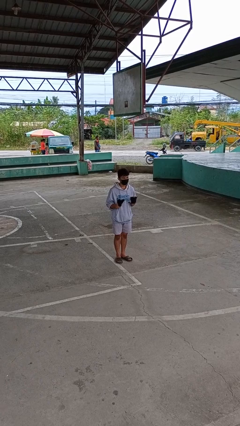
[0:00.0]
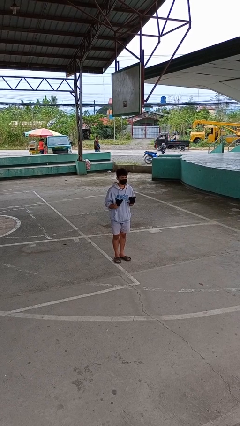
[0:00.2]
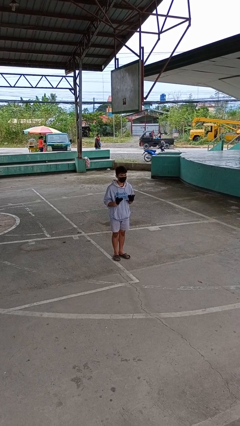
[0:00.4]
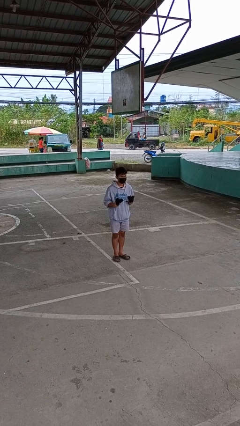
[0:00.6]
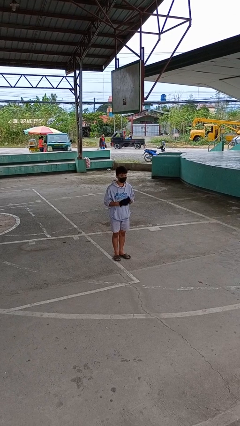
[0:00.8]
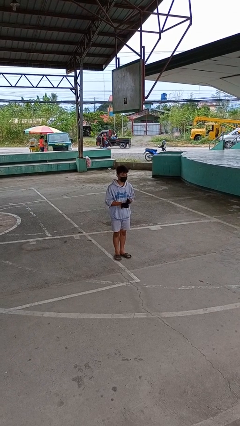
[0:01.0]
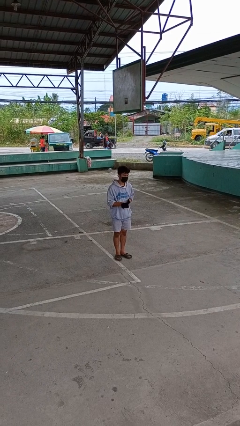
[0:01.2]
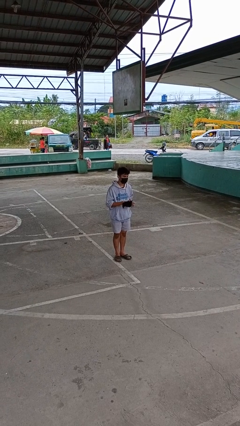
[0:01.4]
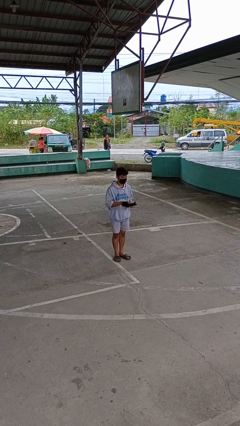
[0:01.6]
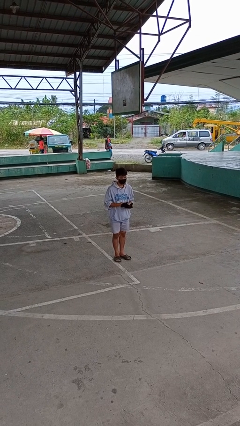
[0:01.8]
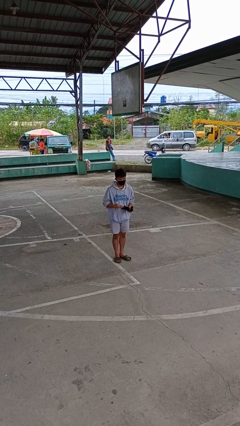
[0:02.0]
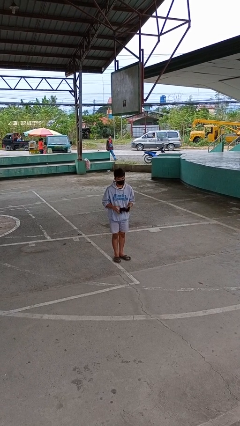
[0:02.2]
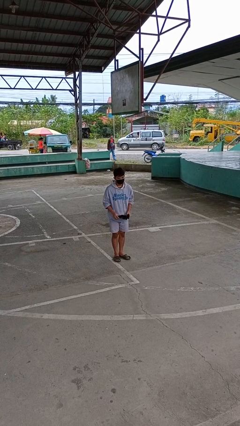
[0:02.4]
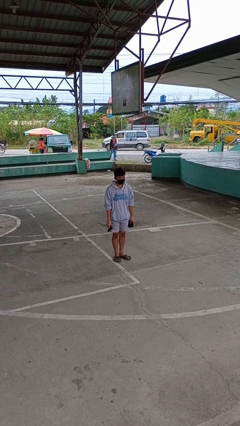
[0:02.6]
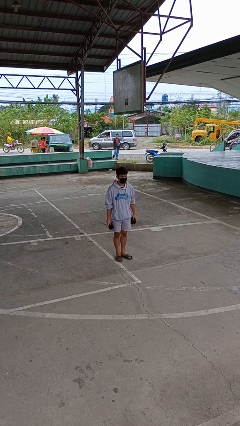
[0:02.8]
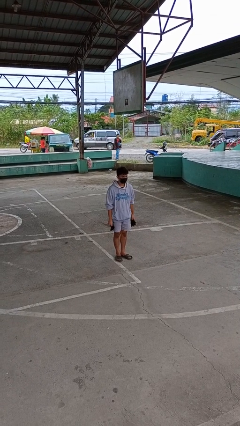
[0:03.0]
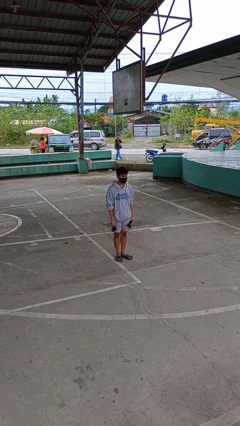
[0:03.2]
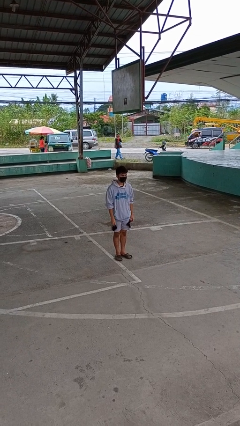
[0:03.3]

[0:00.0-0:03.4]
person takes off gloves

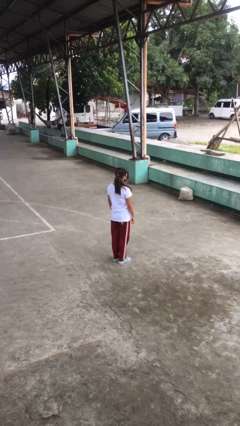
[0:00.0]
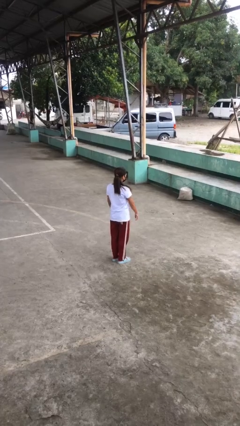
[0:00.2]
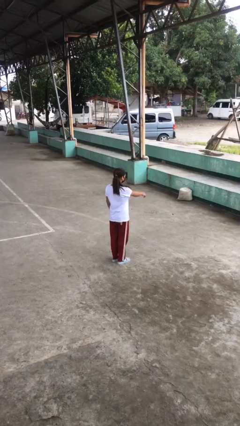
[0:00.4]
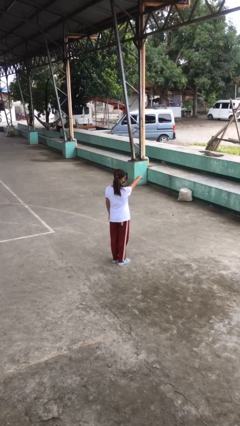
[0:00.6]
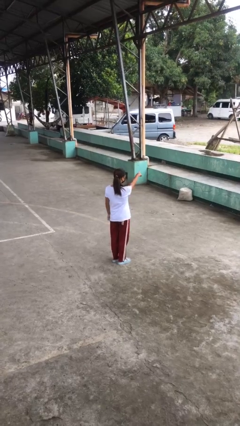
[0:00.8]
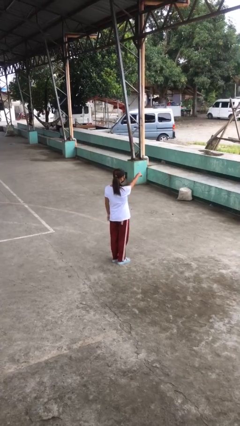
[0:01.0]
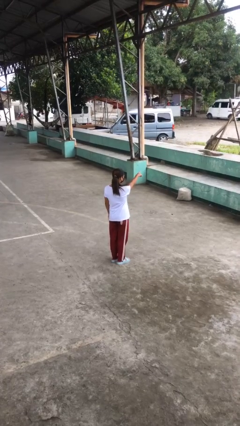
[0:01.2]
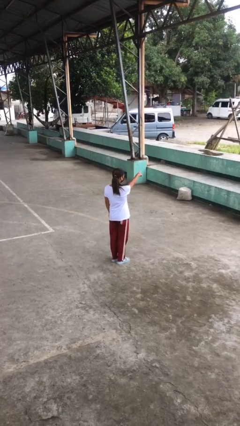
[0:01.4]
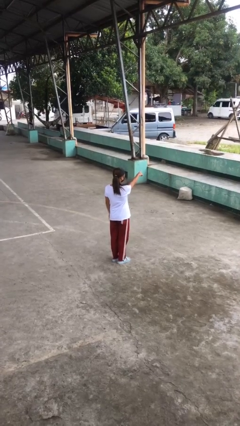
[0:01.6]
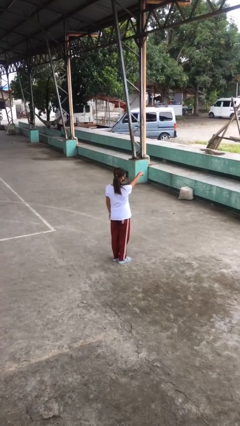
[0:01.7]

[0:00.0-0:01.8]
person points at person

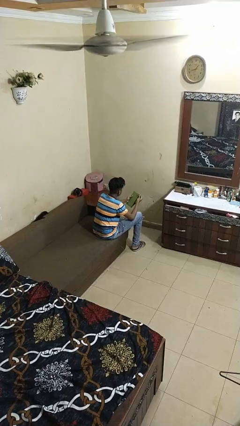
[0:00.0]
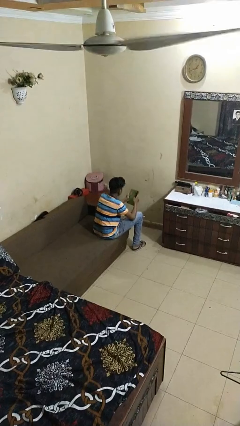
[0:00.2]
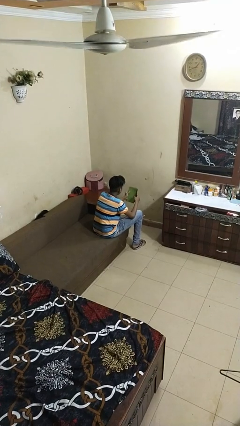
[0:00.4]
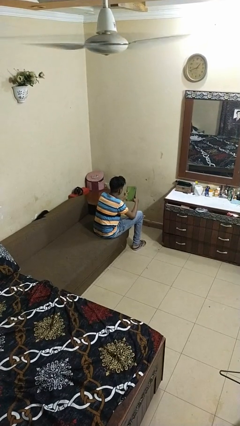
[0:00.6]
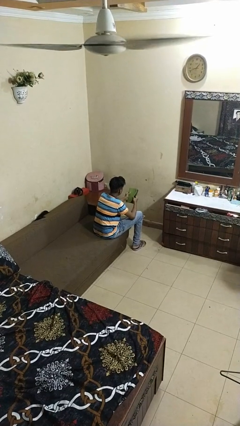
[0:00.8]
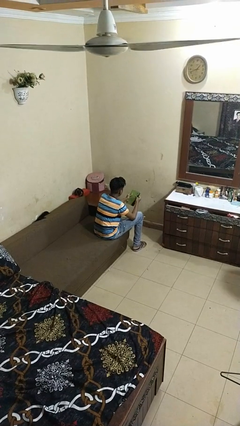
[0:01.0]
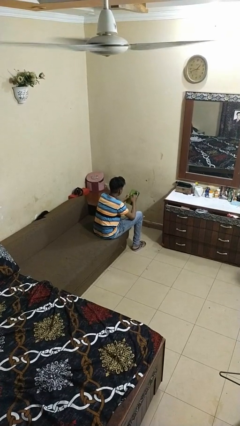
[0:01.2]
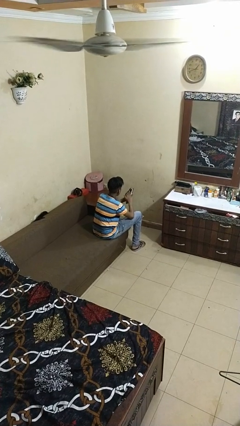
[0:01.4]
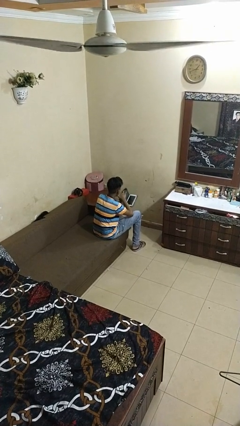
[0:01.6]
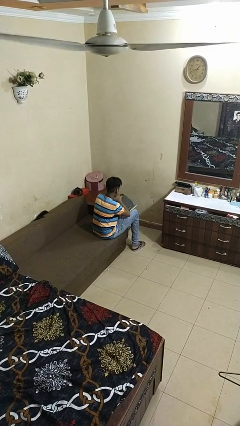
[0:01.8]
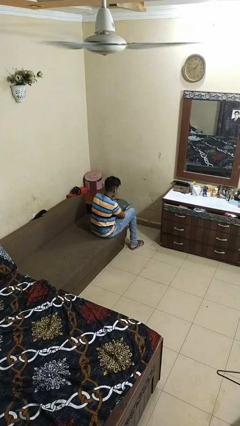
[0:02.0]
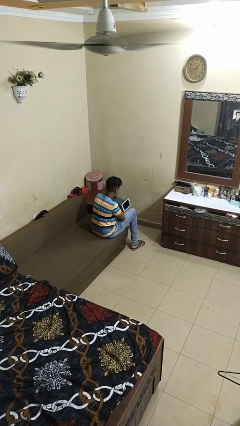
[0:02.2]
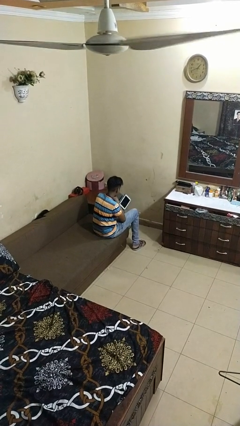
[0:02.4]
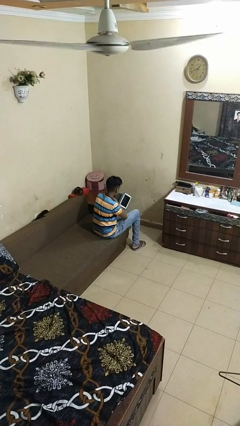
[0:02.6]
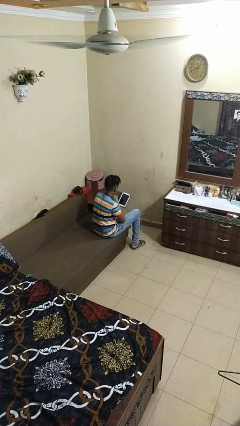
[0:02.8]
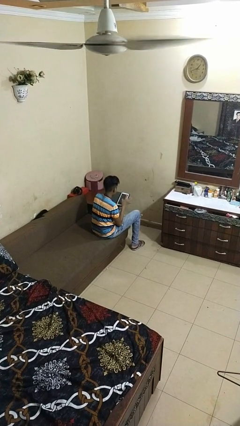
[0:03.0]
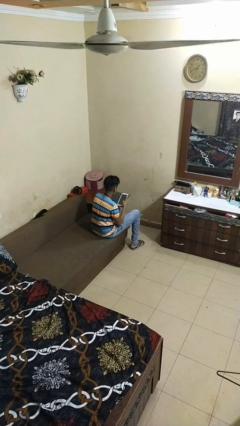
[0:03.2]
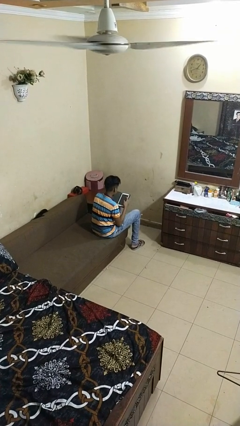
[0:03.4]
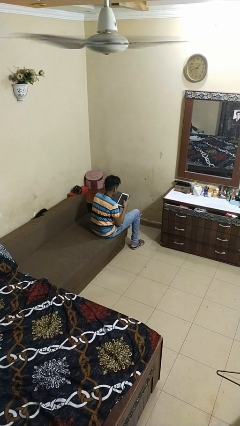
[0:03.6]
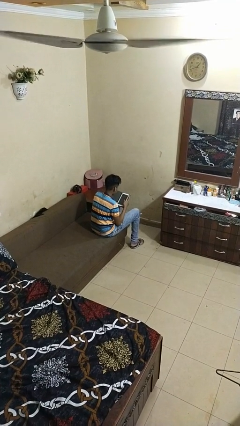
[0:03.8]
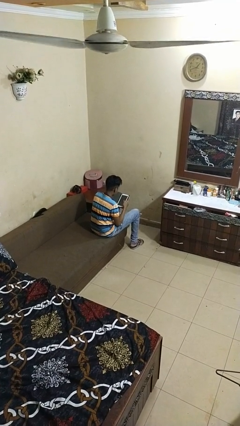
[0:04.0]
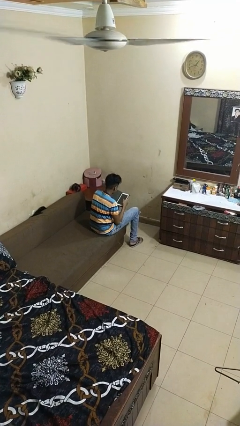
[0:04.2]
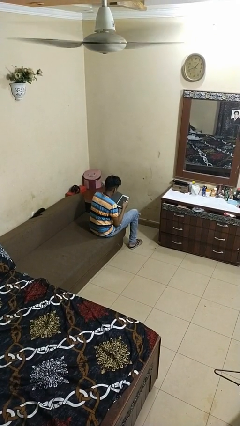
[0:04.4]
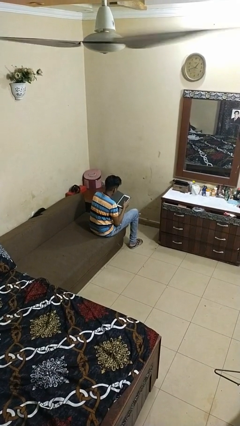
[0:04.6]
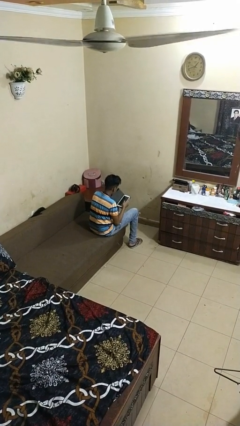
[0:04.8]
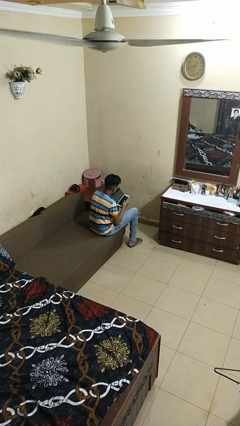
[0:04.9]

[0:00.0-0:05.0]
person interacts with tablet

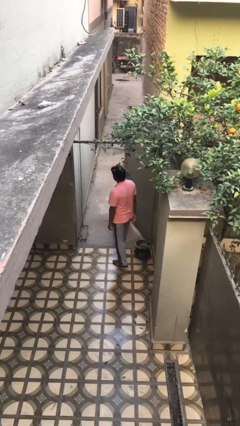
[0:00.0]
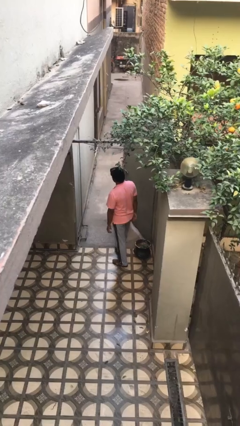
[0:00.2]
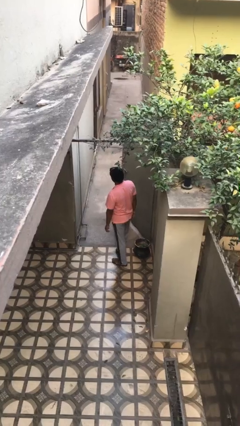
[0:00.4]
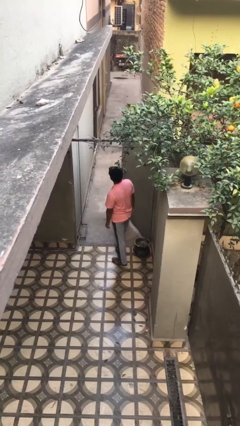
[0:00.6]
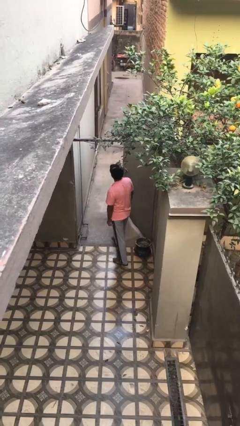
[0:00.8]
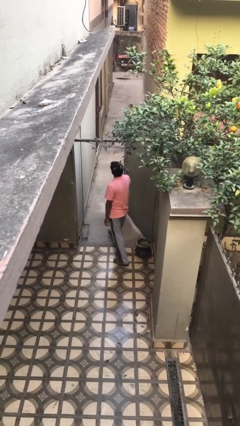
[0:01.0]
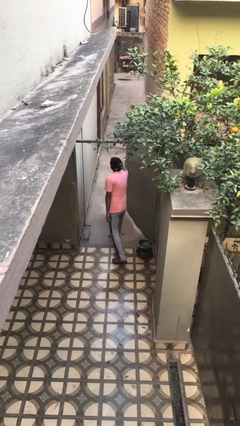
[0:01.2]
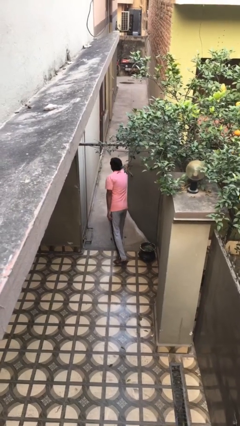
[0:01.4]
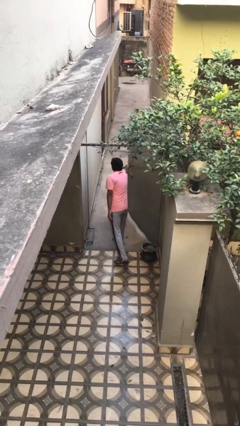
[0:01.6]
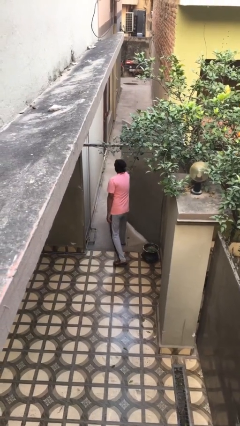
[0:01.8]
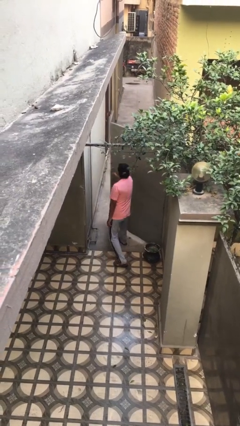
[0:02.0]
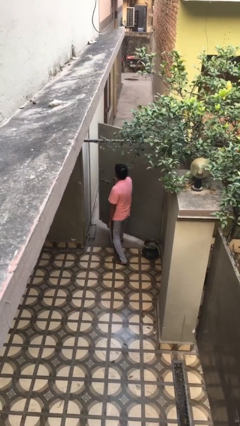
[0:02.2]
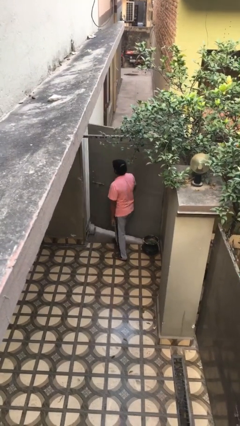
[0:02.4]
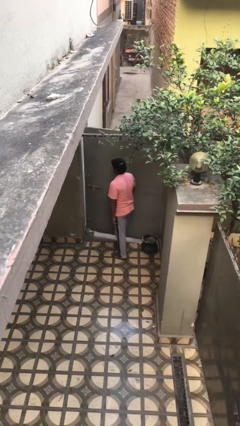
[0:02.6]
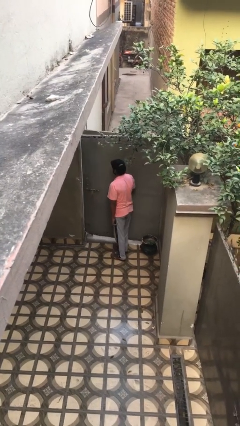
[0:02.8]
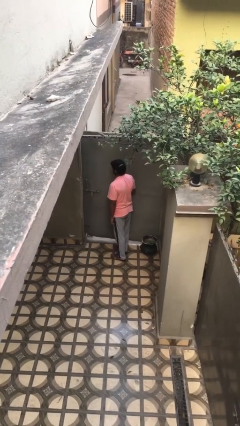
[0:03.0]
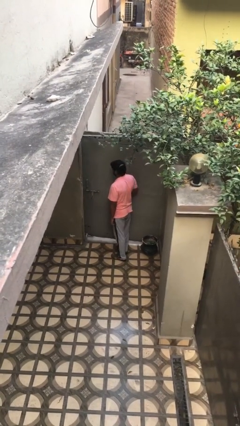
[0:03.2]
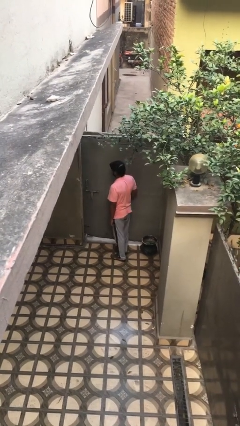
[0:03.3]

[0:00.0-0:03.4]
person closes facility door

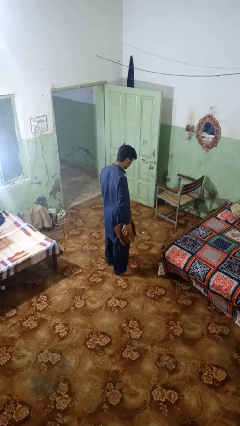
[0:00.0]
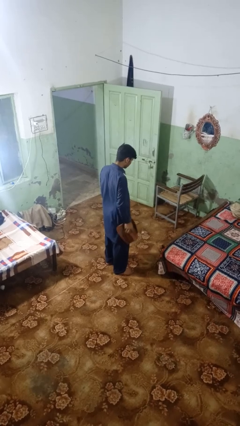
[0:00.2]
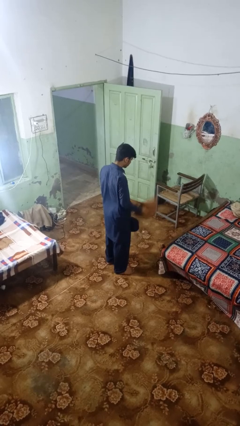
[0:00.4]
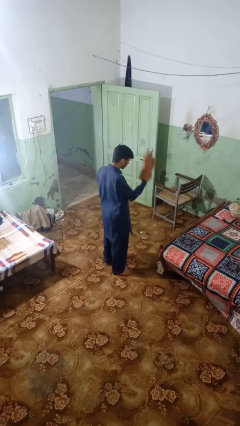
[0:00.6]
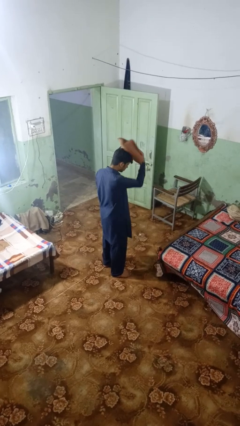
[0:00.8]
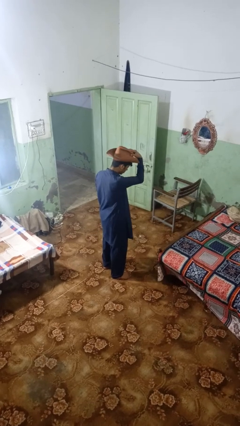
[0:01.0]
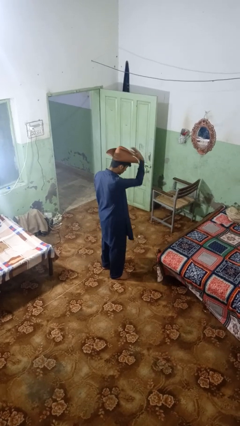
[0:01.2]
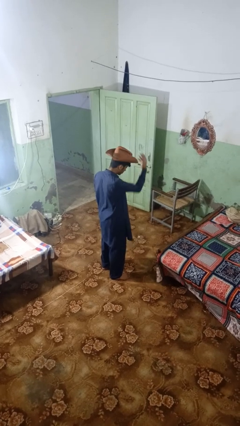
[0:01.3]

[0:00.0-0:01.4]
person puts on hat

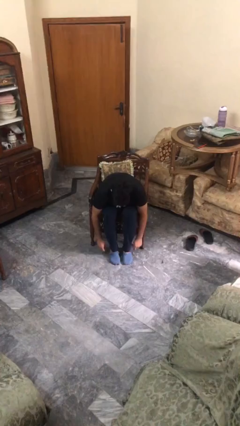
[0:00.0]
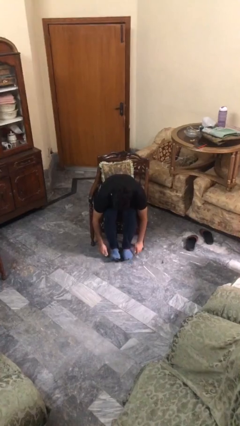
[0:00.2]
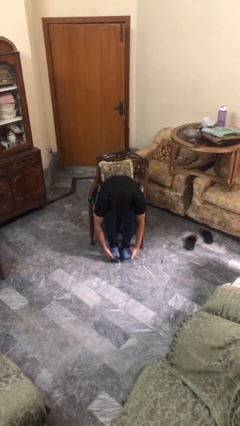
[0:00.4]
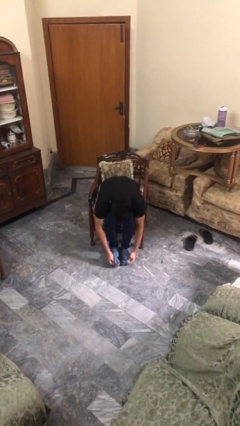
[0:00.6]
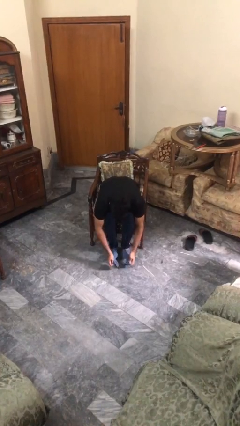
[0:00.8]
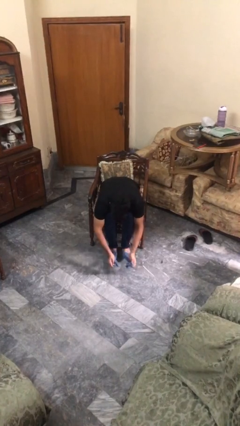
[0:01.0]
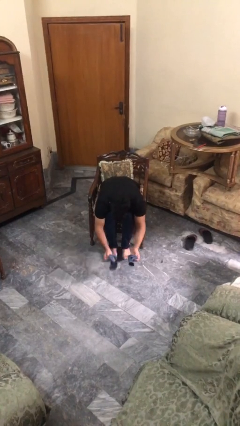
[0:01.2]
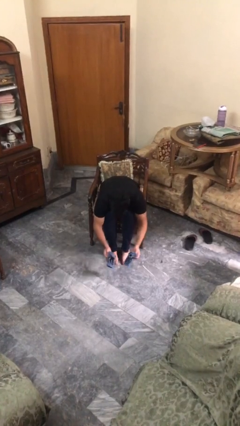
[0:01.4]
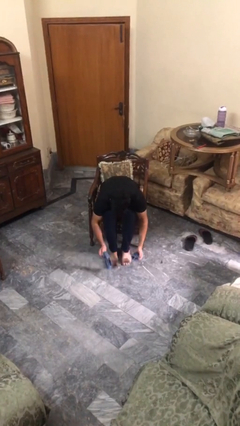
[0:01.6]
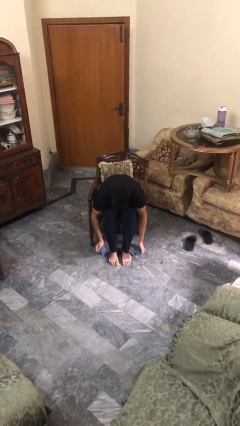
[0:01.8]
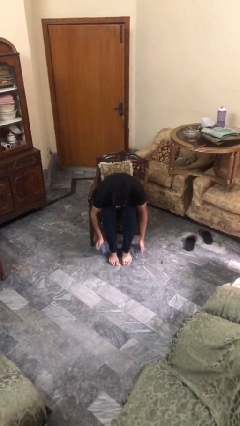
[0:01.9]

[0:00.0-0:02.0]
person takes off socks

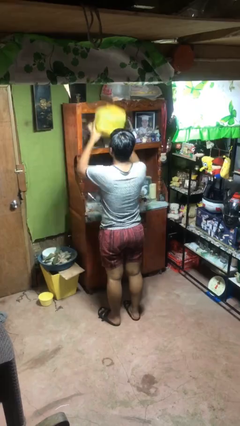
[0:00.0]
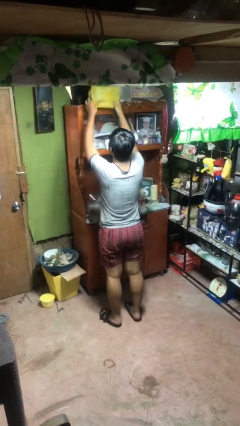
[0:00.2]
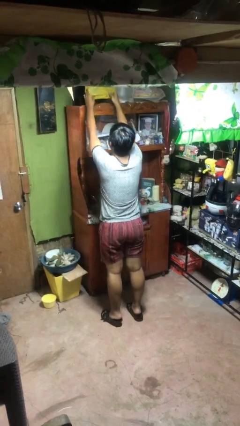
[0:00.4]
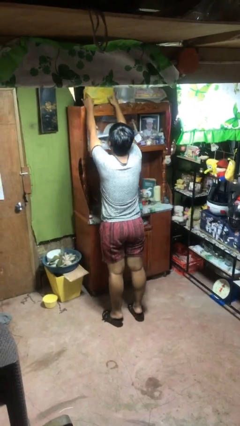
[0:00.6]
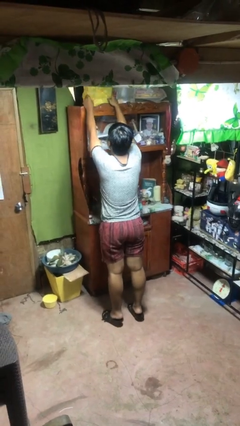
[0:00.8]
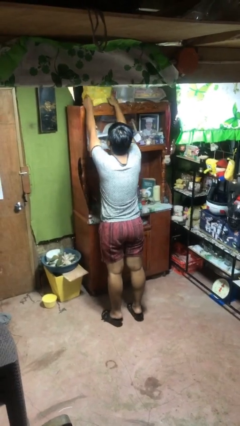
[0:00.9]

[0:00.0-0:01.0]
person puts down object on shelf
